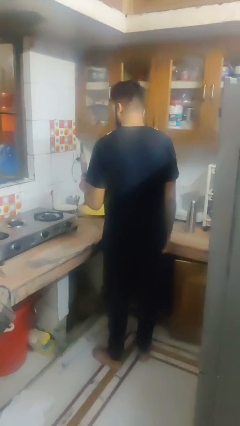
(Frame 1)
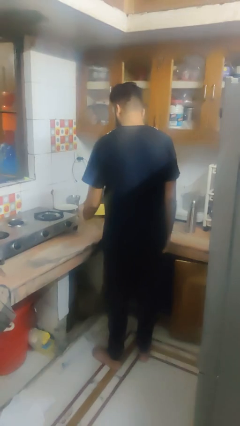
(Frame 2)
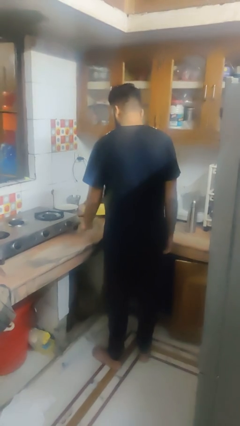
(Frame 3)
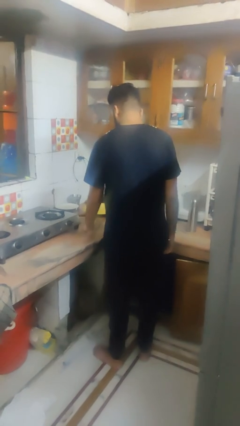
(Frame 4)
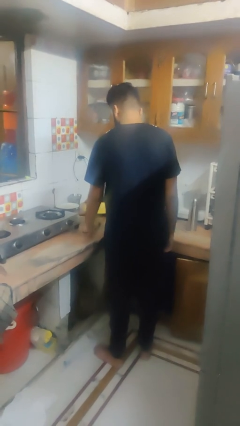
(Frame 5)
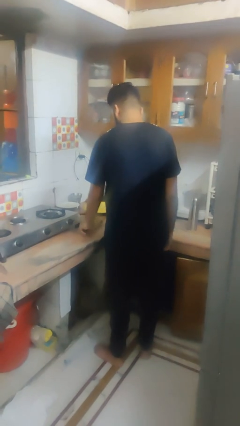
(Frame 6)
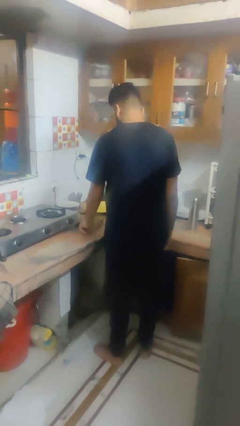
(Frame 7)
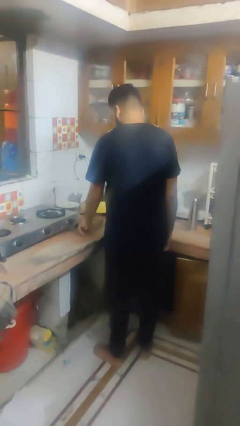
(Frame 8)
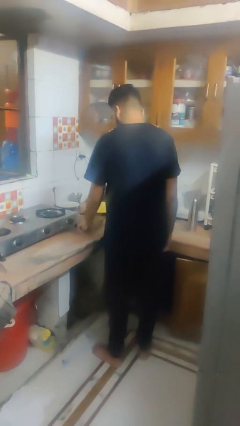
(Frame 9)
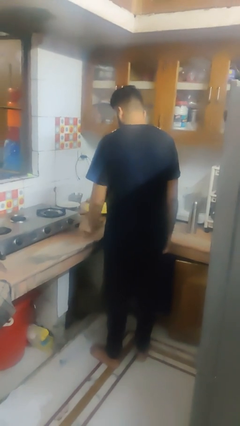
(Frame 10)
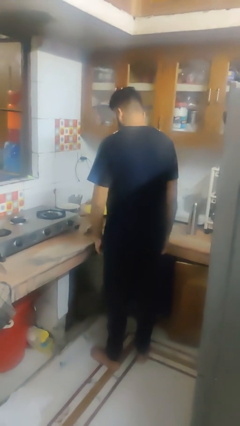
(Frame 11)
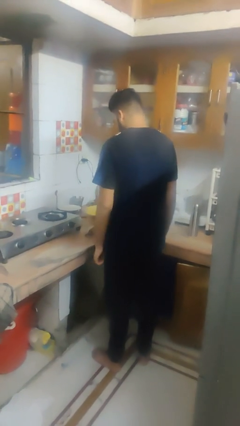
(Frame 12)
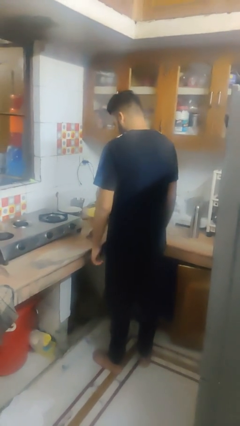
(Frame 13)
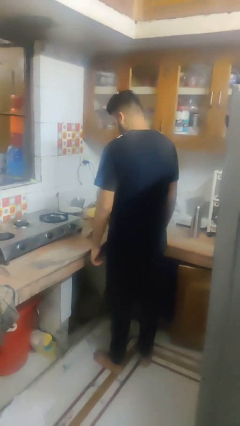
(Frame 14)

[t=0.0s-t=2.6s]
person puts down object into cabinet

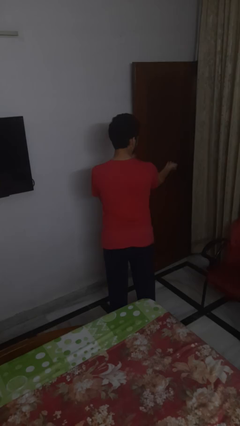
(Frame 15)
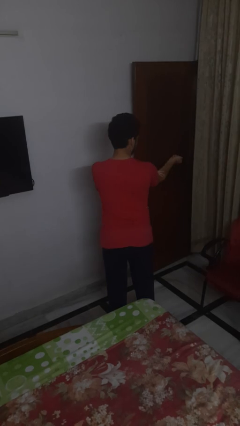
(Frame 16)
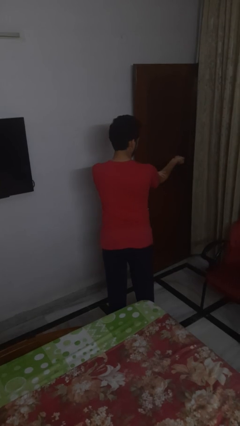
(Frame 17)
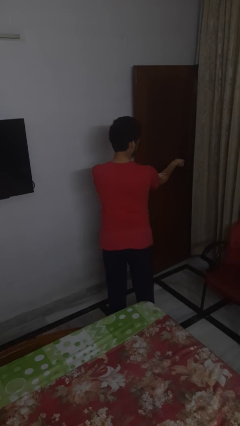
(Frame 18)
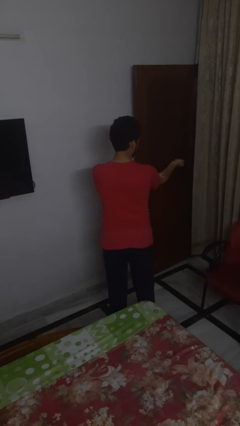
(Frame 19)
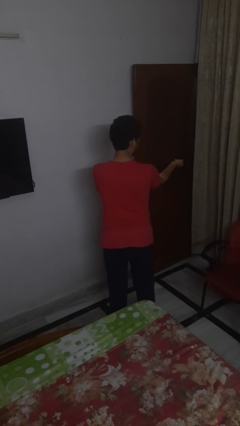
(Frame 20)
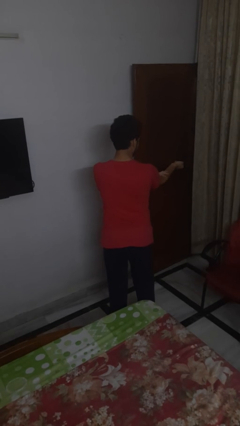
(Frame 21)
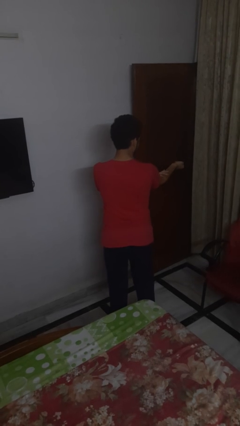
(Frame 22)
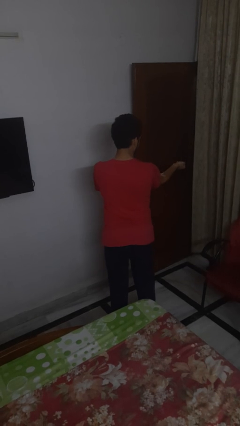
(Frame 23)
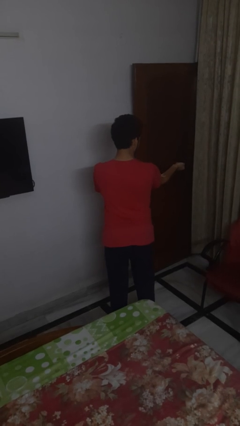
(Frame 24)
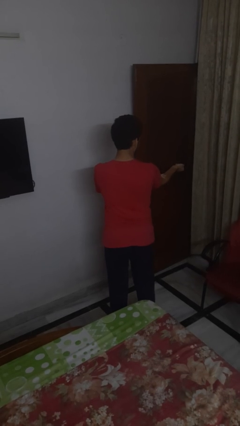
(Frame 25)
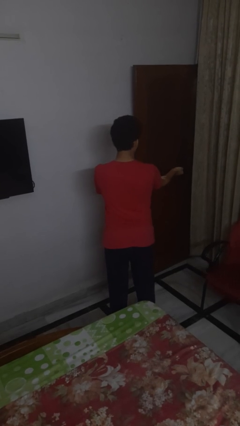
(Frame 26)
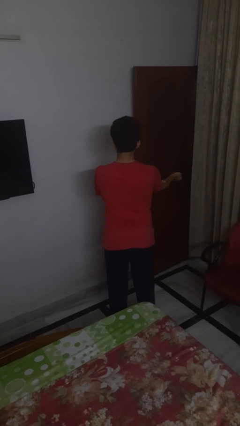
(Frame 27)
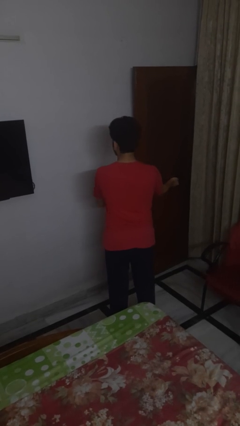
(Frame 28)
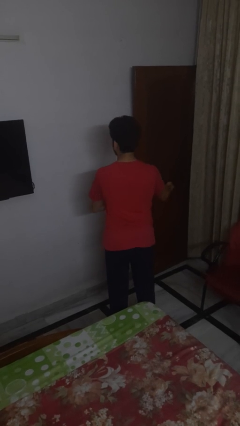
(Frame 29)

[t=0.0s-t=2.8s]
person swats bug

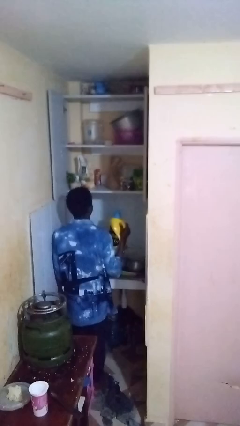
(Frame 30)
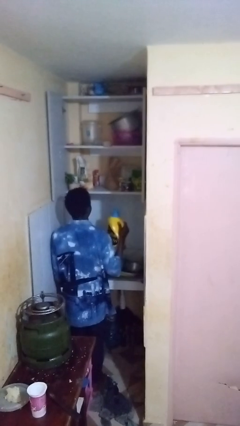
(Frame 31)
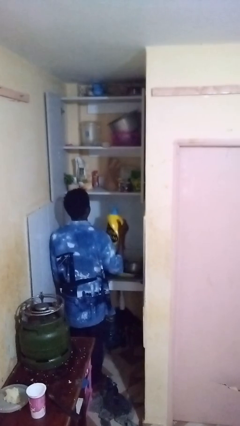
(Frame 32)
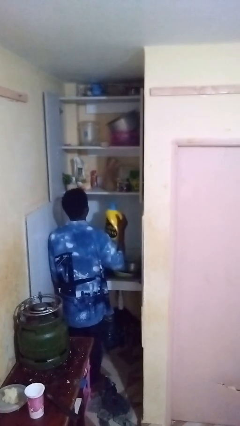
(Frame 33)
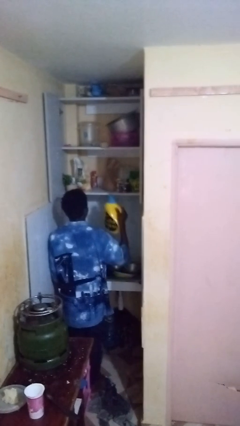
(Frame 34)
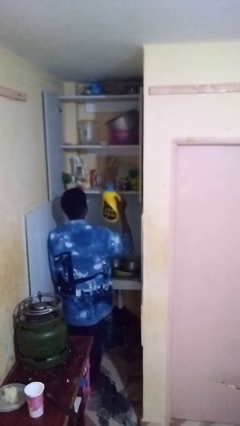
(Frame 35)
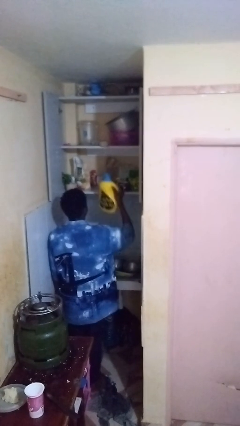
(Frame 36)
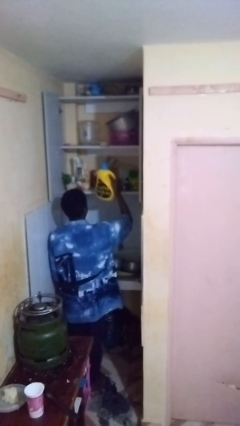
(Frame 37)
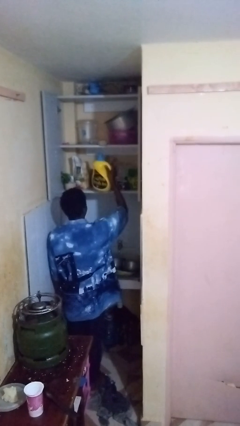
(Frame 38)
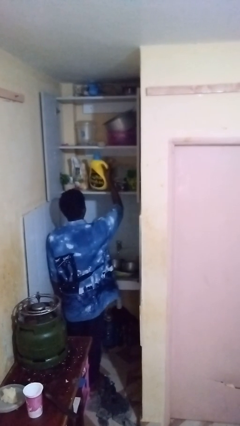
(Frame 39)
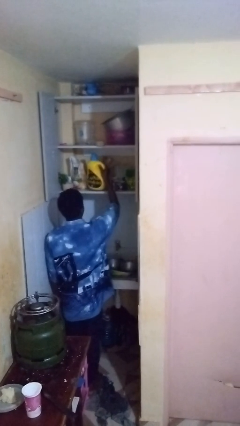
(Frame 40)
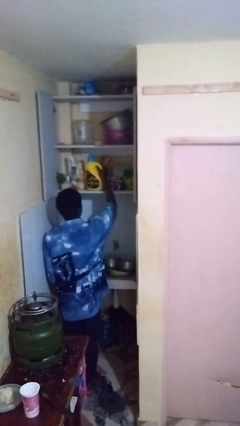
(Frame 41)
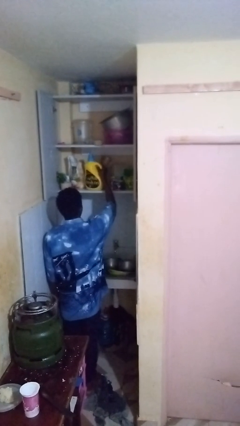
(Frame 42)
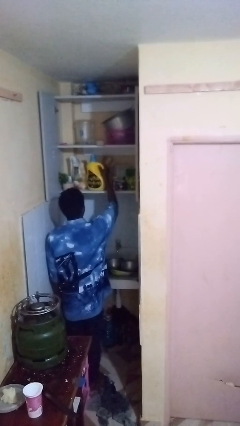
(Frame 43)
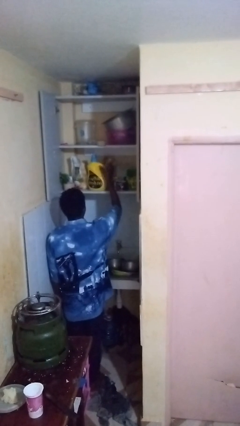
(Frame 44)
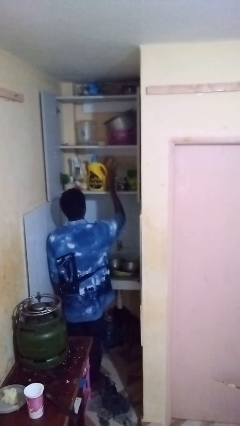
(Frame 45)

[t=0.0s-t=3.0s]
person puts down object on countertop

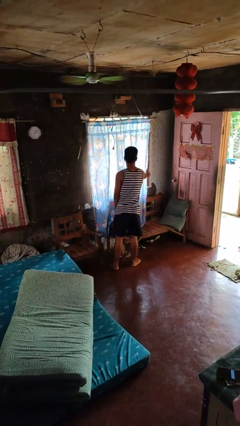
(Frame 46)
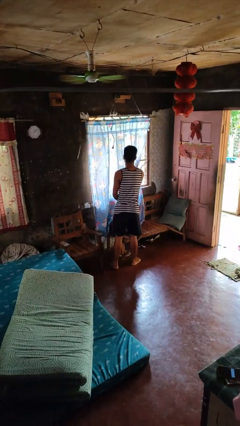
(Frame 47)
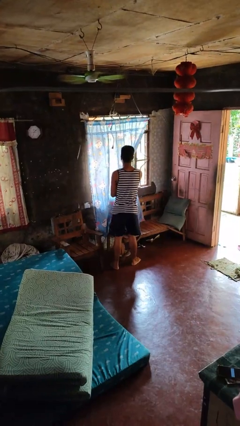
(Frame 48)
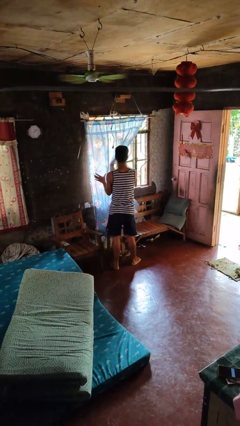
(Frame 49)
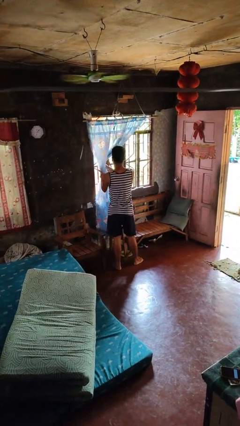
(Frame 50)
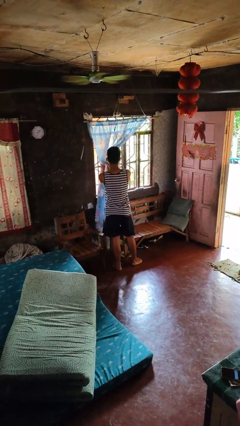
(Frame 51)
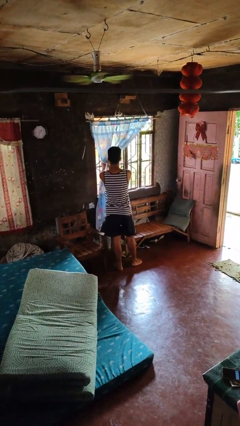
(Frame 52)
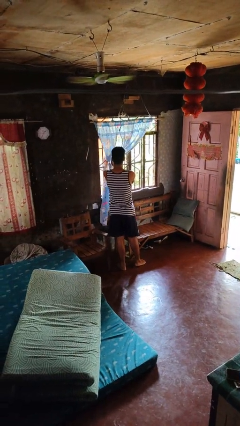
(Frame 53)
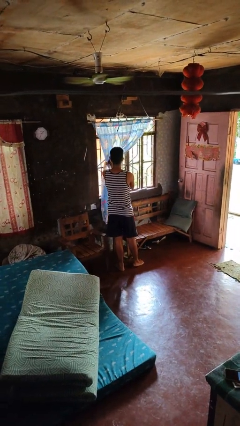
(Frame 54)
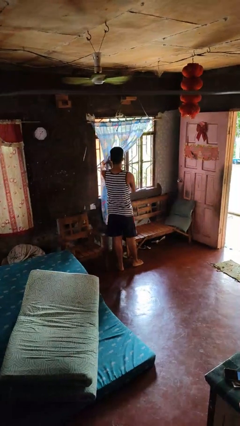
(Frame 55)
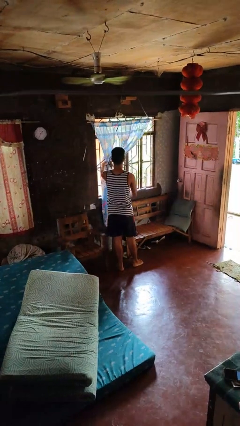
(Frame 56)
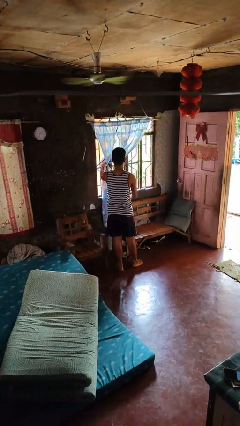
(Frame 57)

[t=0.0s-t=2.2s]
person opens curtains

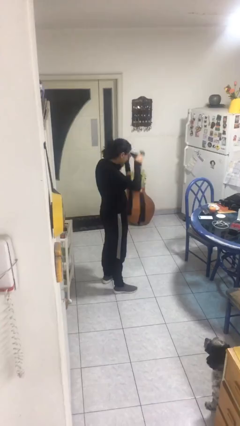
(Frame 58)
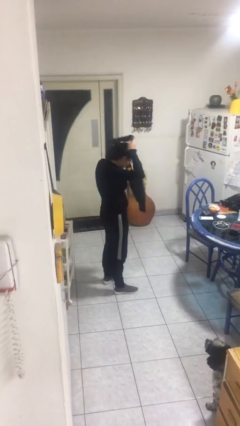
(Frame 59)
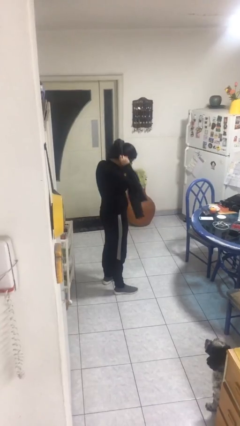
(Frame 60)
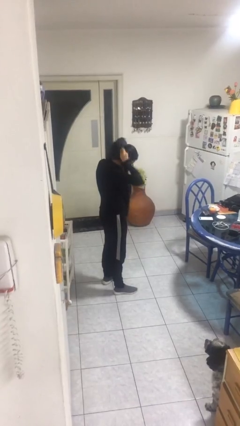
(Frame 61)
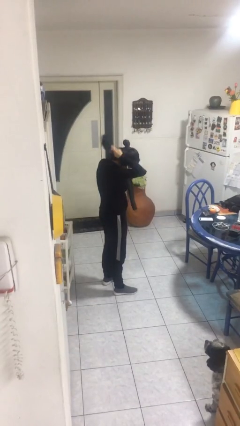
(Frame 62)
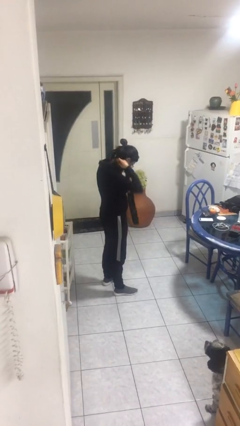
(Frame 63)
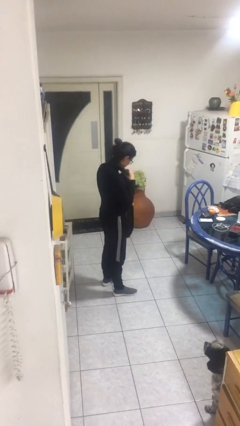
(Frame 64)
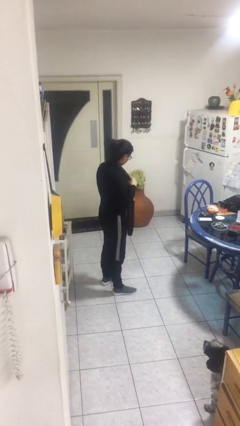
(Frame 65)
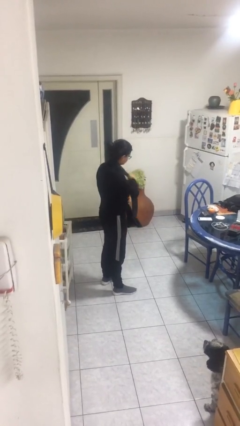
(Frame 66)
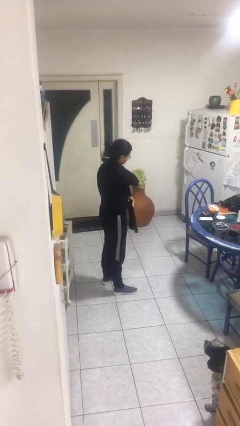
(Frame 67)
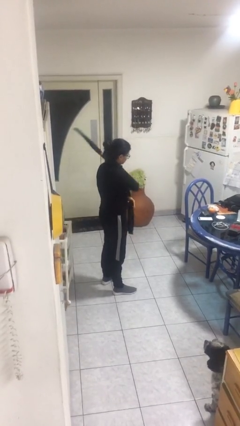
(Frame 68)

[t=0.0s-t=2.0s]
person puts on scarf

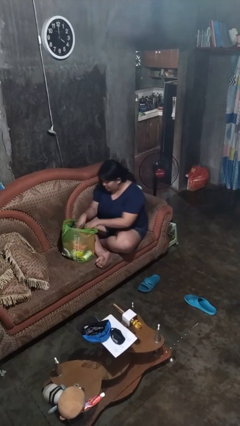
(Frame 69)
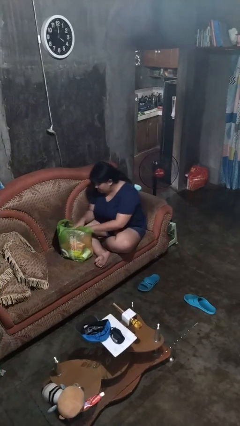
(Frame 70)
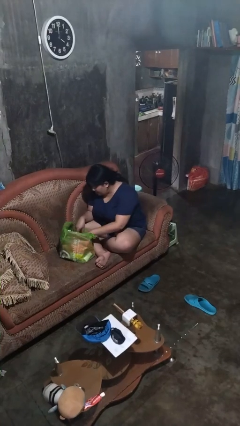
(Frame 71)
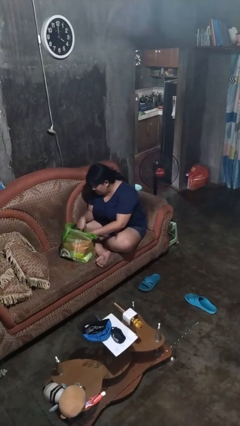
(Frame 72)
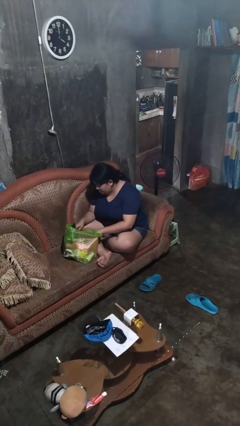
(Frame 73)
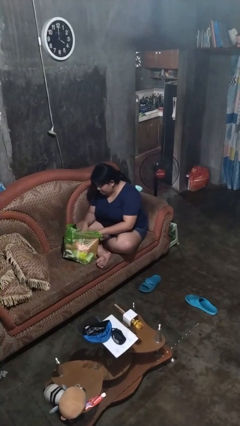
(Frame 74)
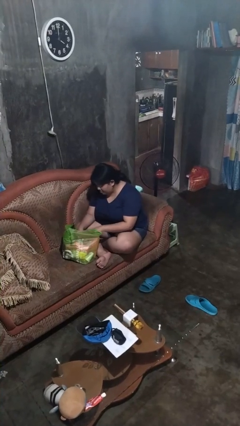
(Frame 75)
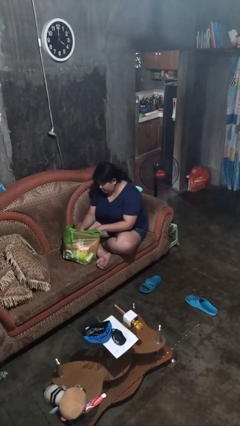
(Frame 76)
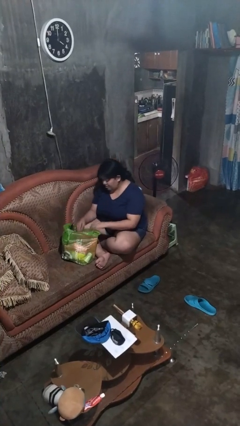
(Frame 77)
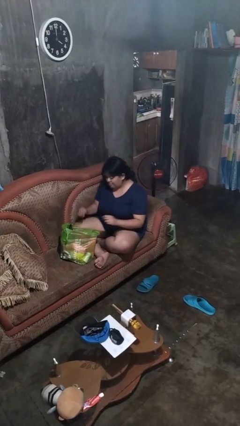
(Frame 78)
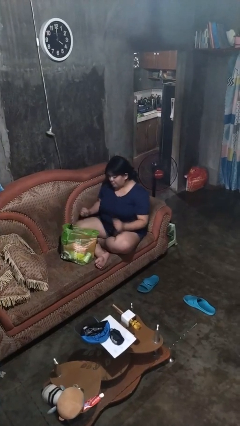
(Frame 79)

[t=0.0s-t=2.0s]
person searches in bag

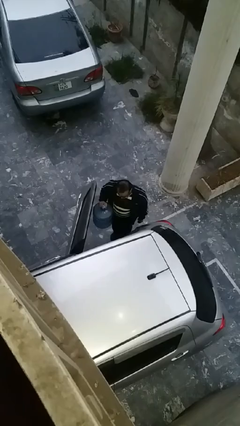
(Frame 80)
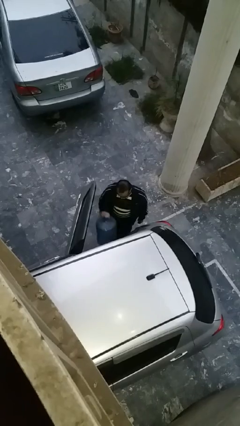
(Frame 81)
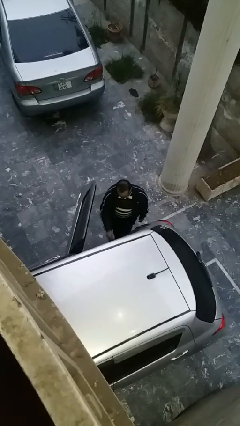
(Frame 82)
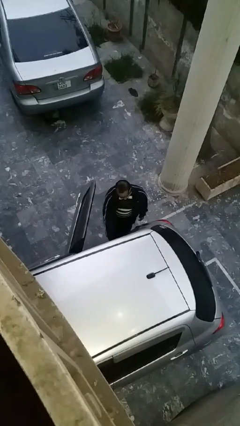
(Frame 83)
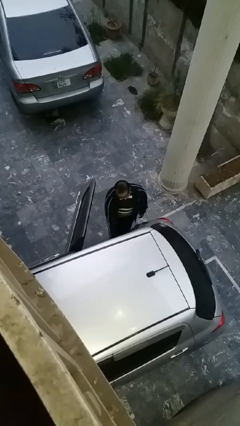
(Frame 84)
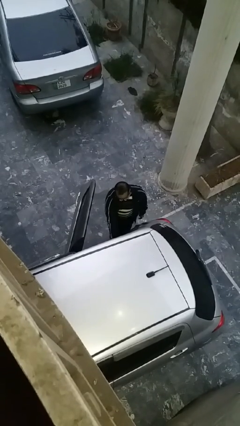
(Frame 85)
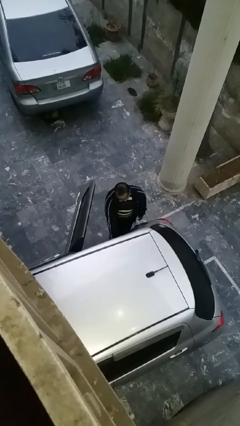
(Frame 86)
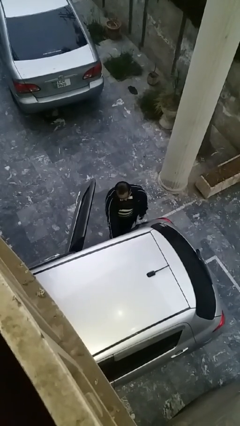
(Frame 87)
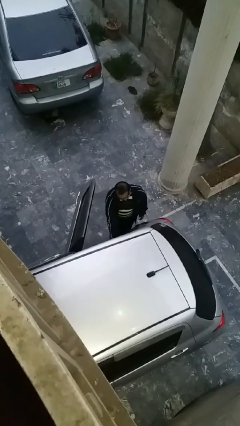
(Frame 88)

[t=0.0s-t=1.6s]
person loads car

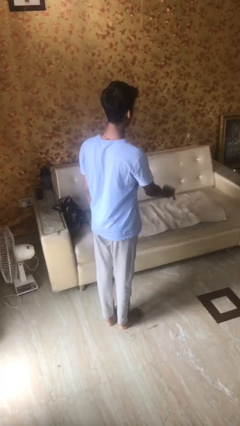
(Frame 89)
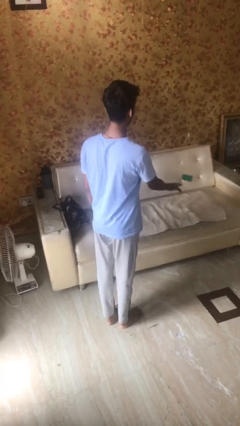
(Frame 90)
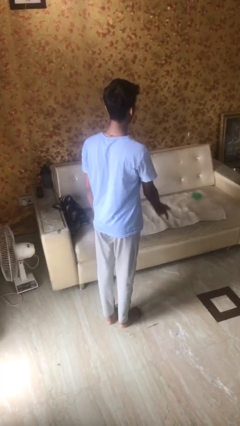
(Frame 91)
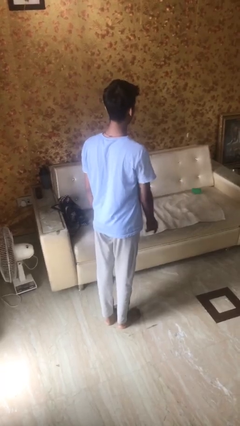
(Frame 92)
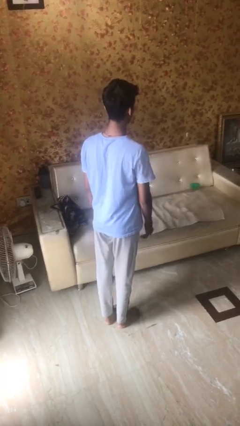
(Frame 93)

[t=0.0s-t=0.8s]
person throws object on bed
